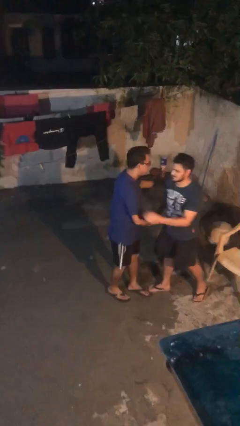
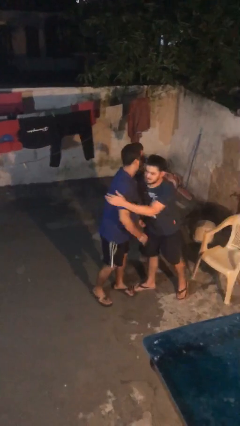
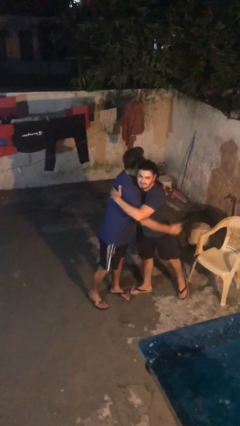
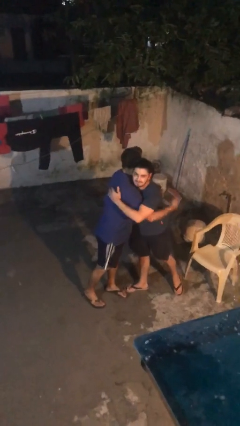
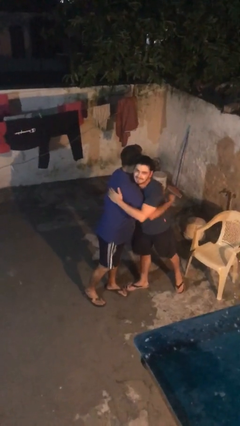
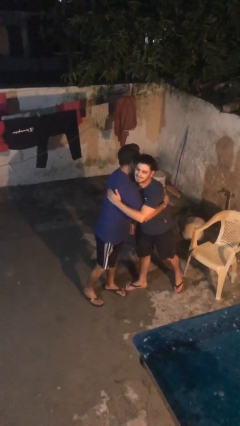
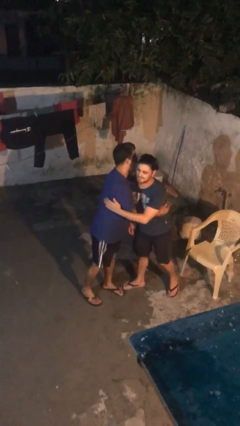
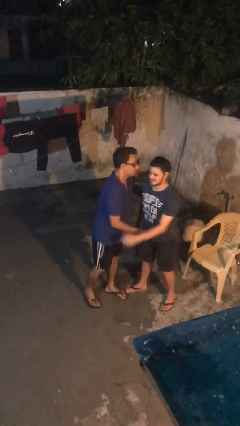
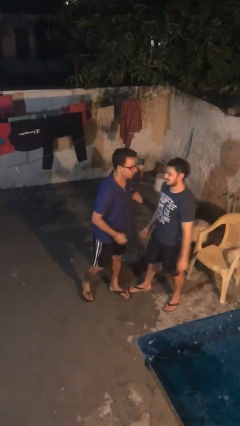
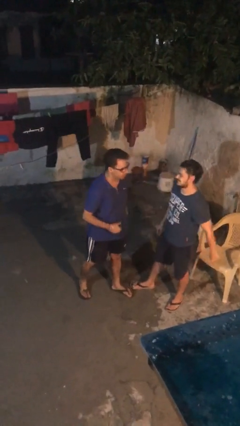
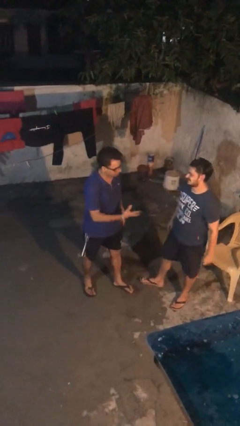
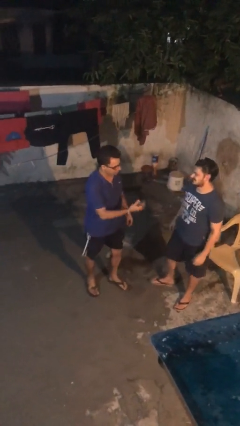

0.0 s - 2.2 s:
person embraces person

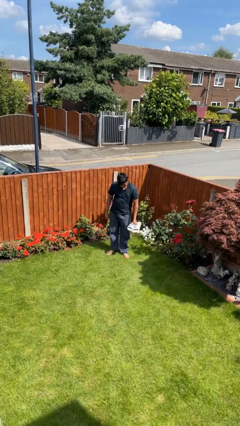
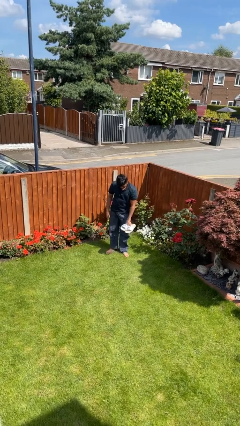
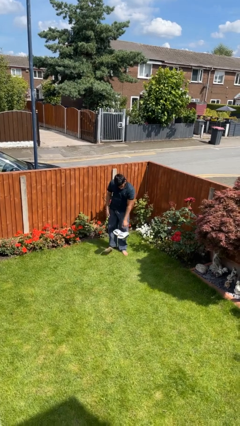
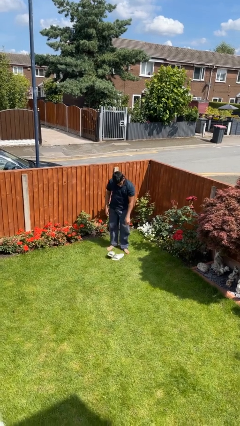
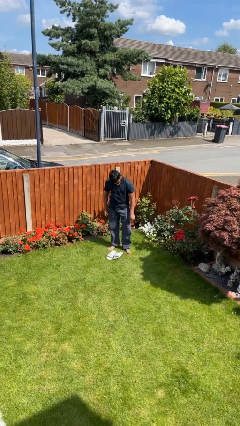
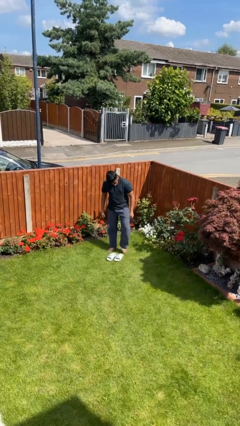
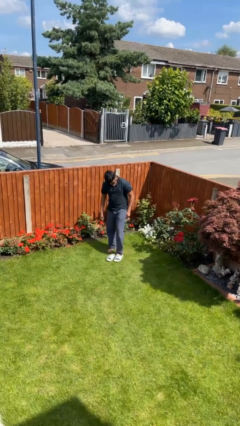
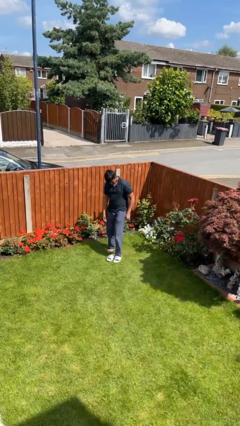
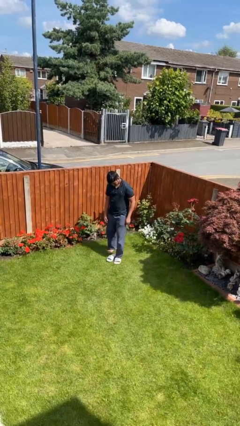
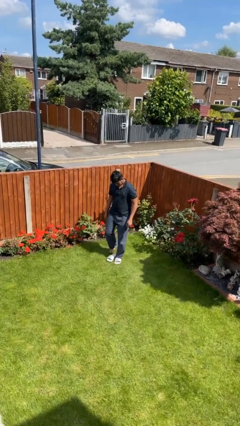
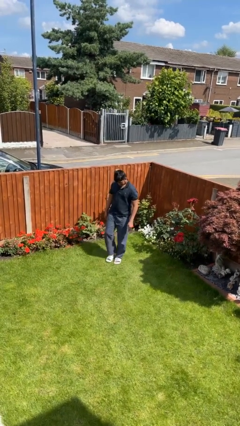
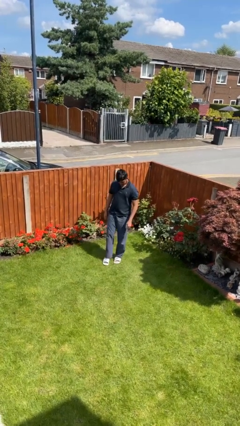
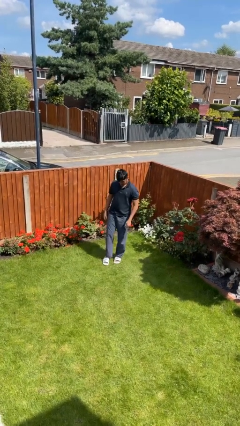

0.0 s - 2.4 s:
person puts on shoes

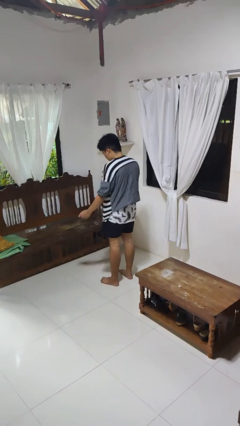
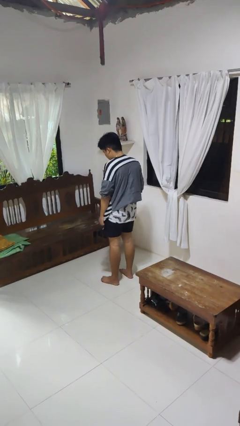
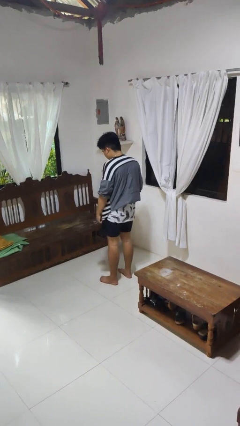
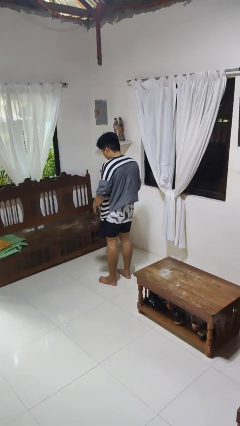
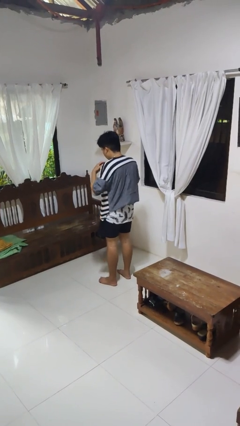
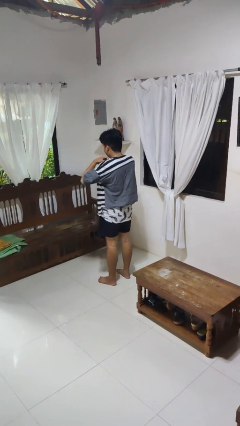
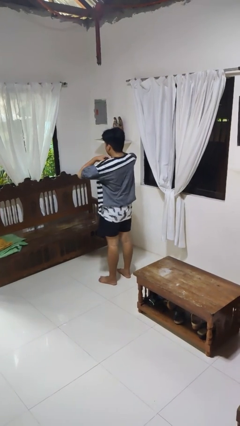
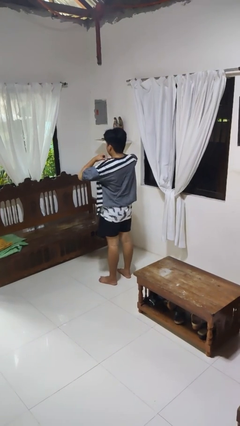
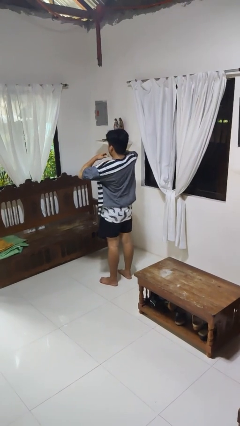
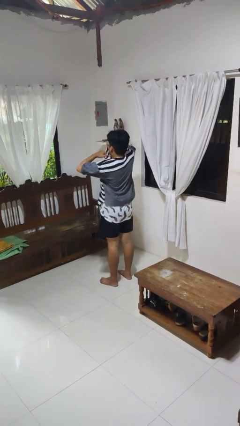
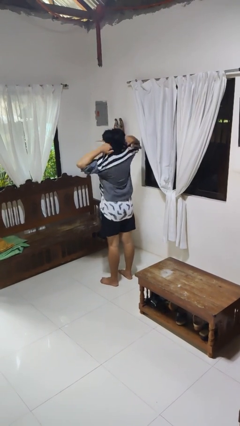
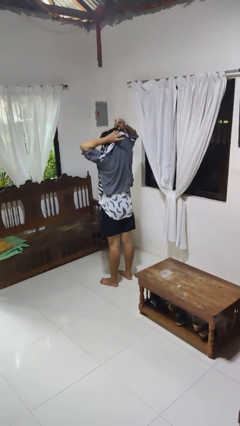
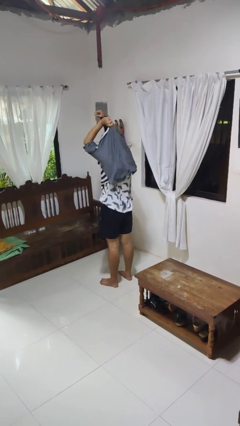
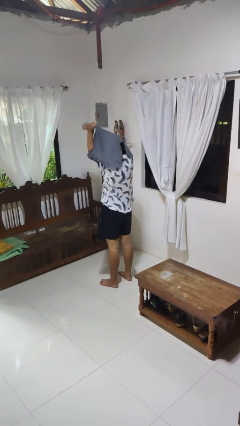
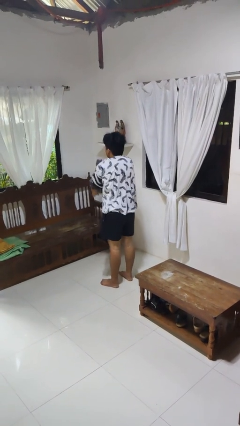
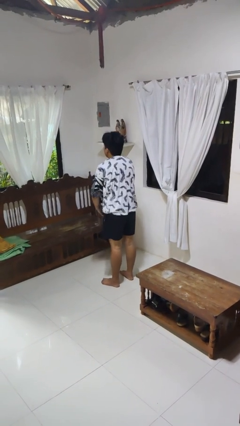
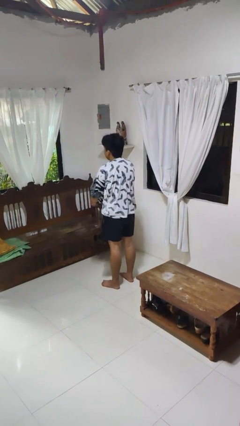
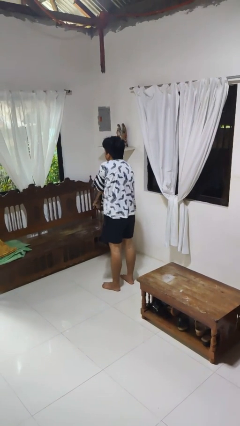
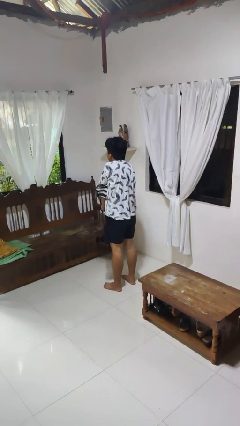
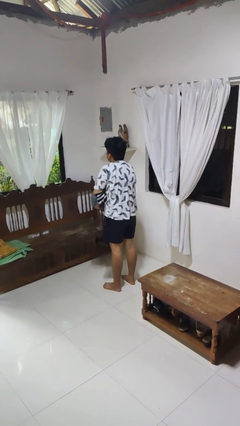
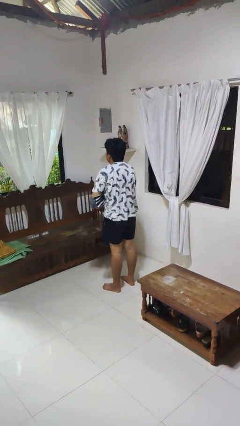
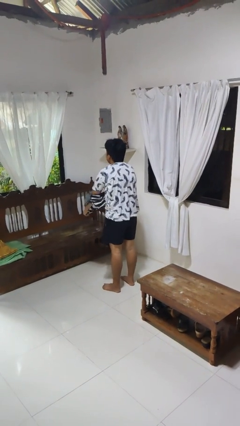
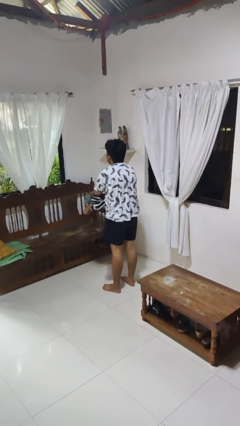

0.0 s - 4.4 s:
person takes off shirt

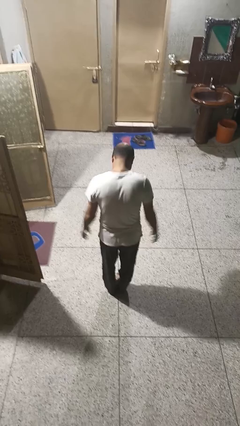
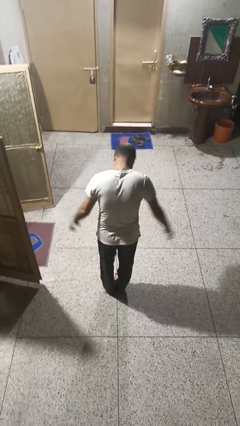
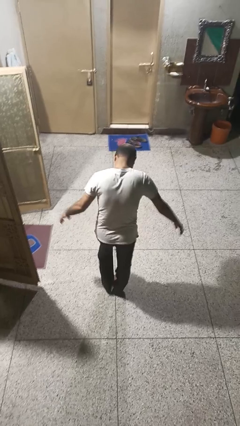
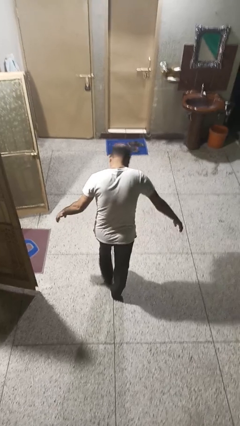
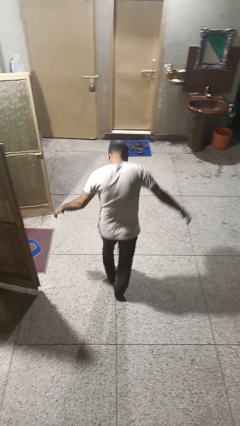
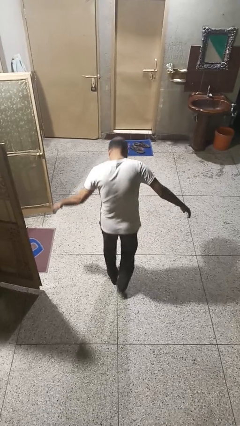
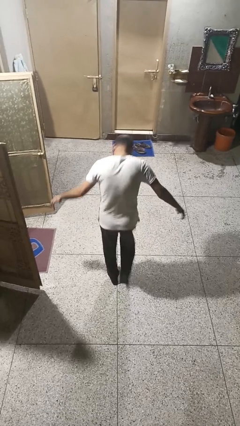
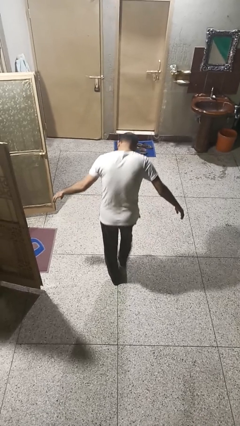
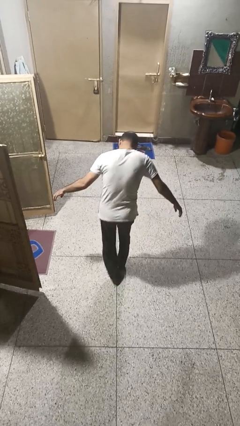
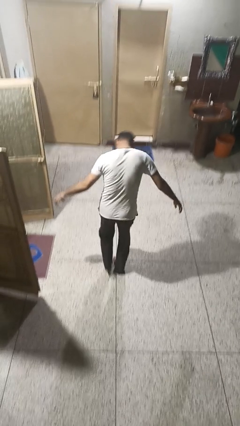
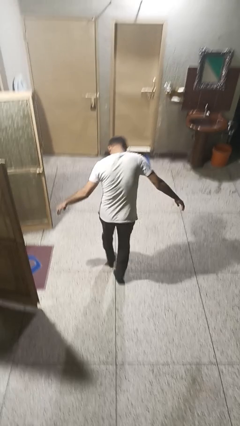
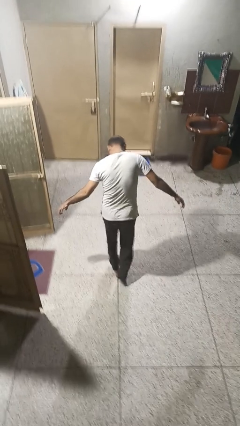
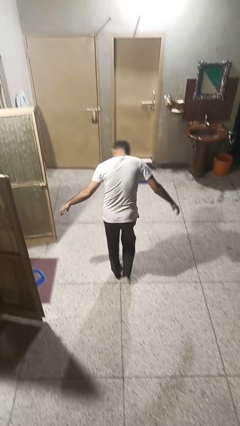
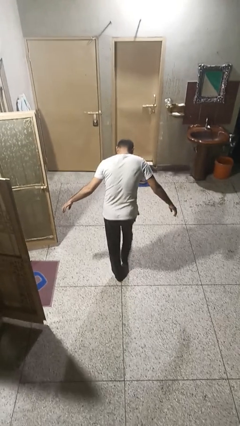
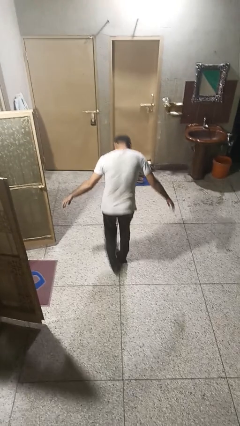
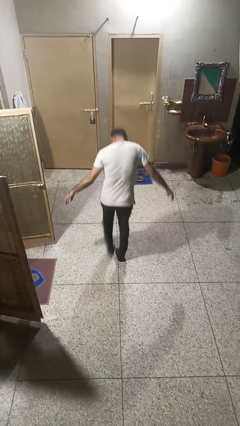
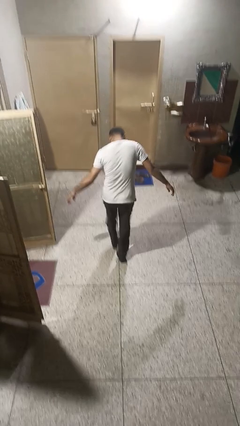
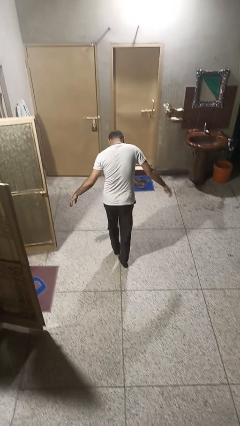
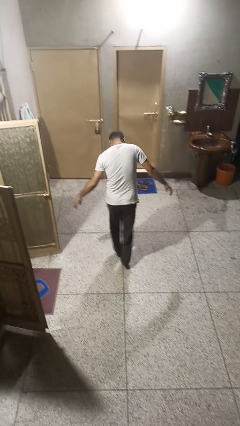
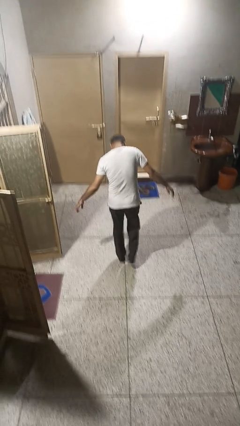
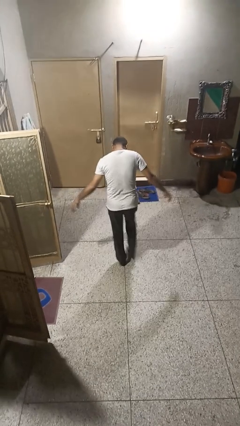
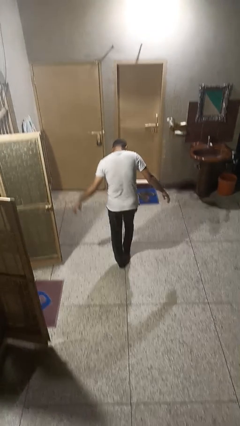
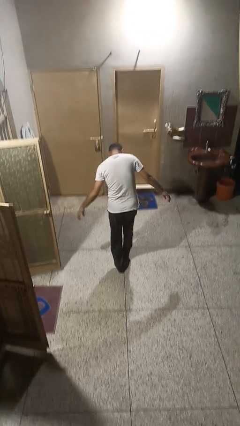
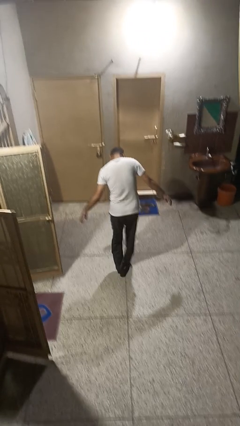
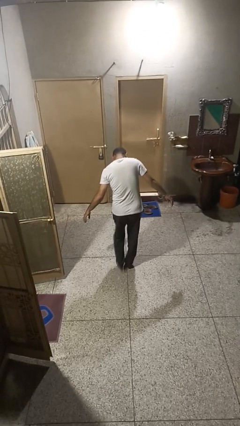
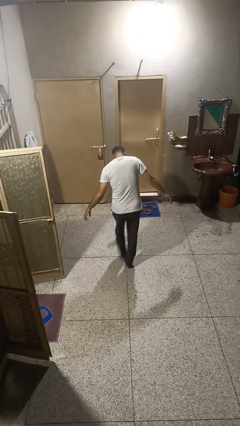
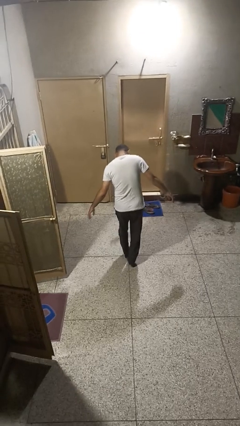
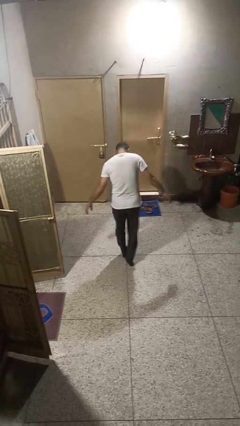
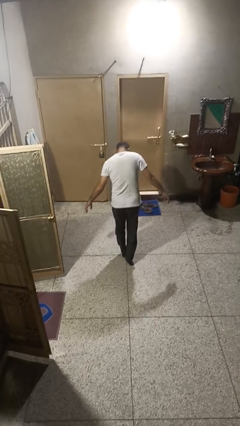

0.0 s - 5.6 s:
person walks tiptoe

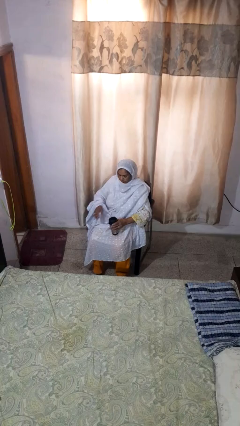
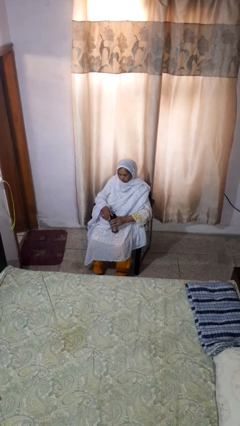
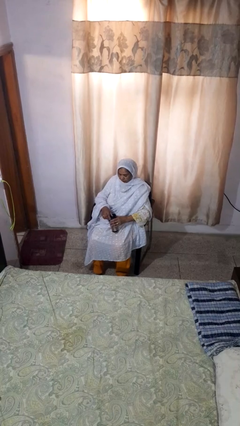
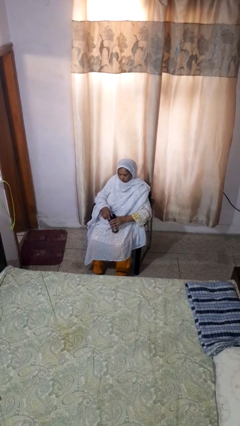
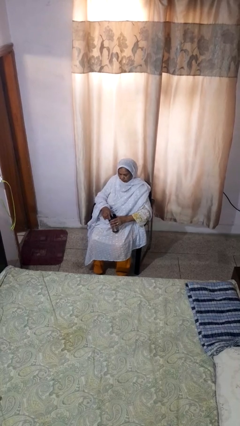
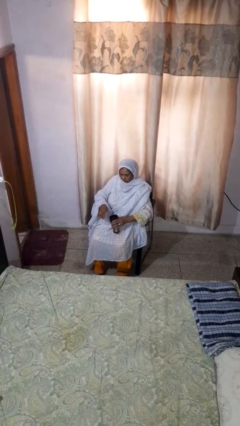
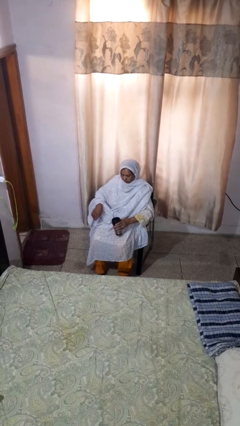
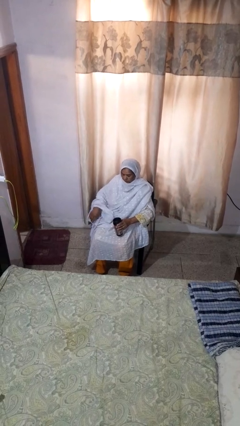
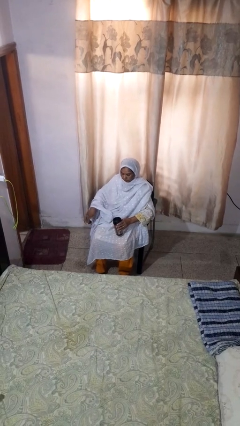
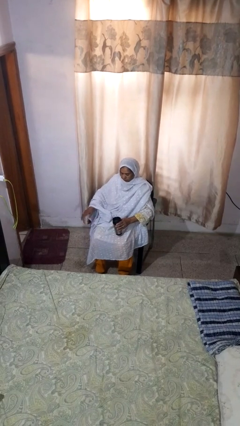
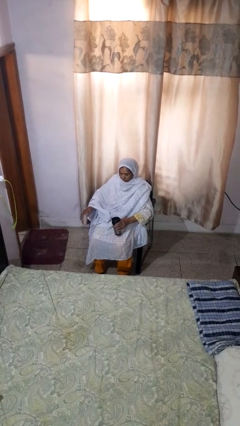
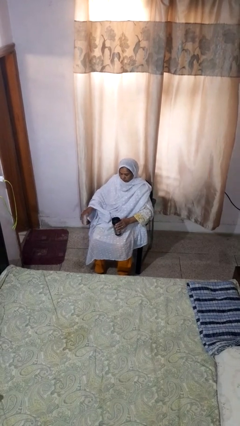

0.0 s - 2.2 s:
person opens beverage can
